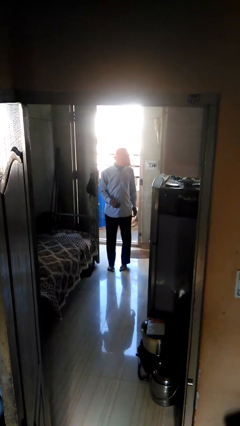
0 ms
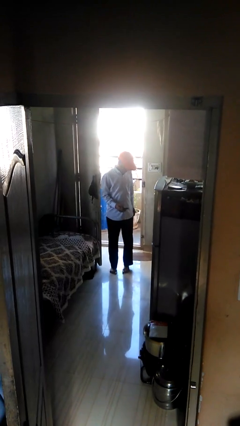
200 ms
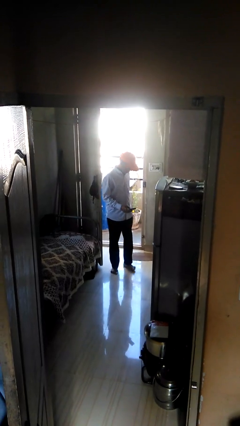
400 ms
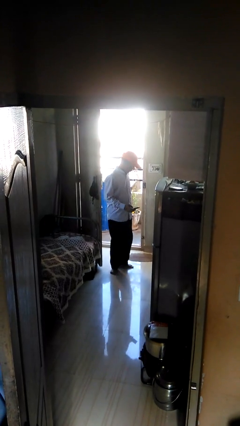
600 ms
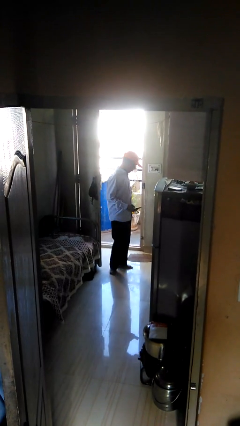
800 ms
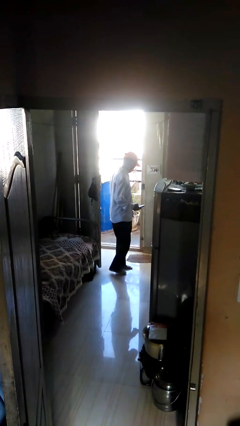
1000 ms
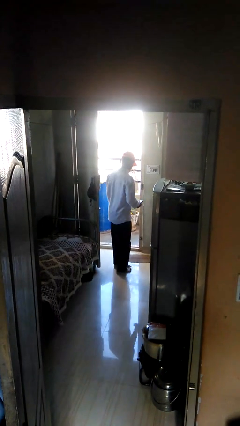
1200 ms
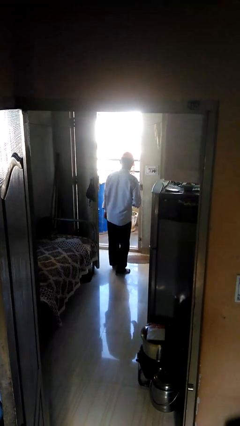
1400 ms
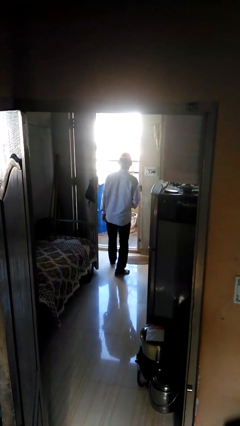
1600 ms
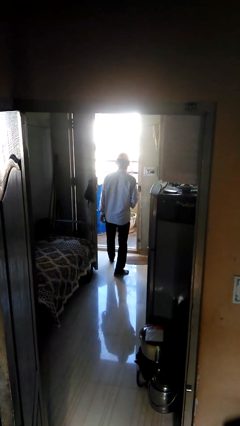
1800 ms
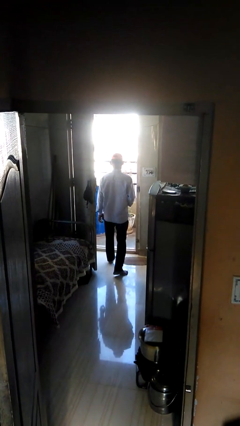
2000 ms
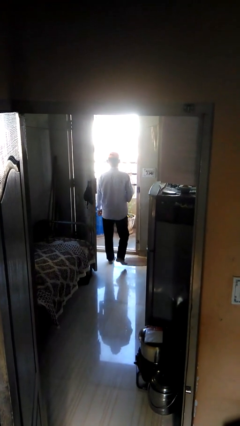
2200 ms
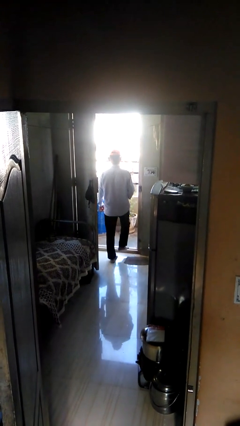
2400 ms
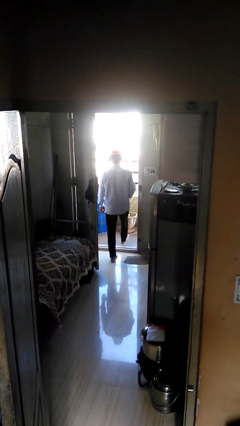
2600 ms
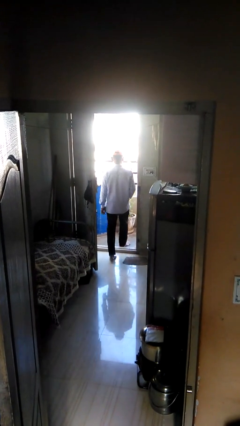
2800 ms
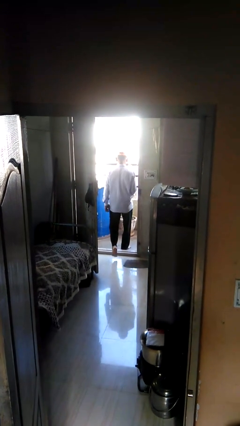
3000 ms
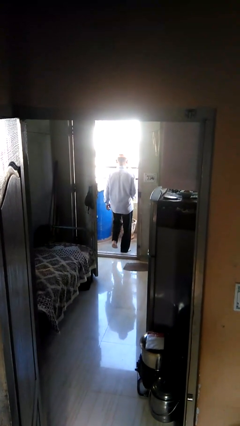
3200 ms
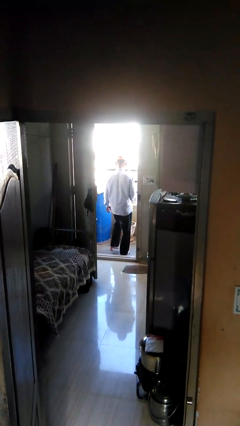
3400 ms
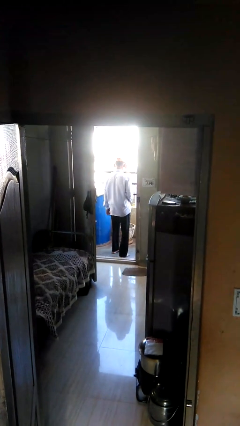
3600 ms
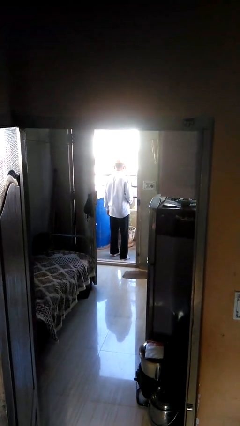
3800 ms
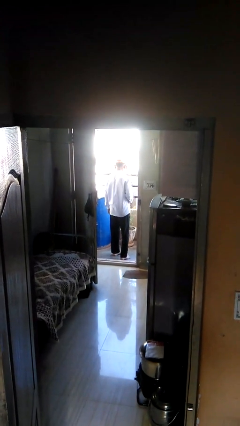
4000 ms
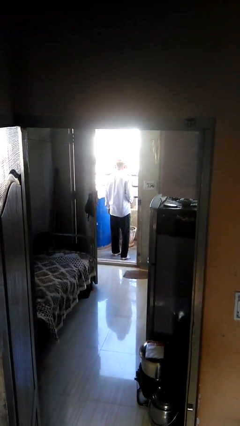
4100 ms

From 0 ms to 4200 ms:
person exits scene through structure

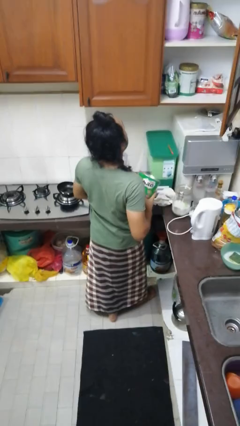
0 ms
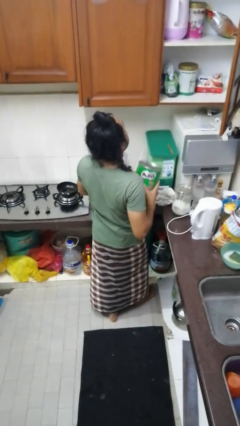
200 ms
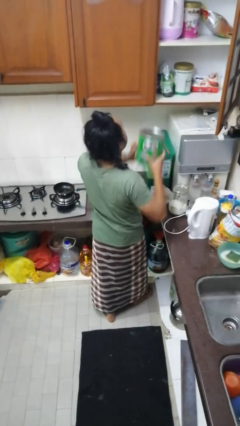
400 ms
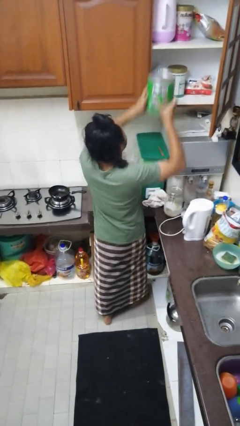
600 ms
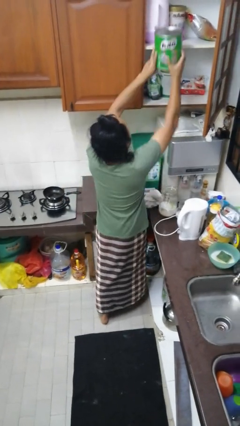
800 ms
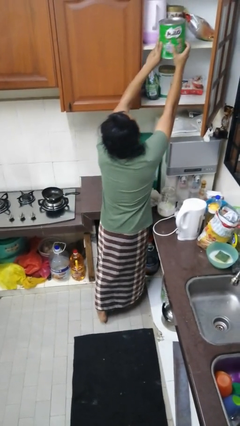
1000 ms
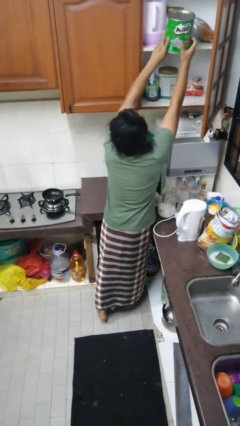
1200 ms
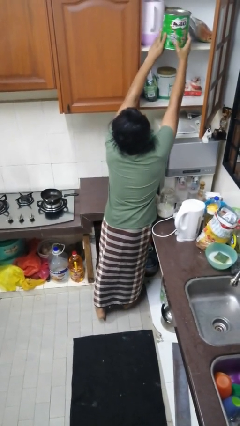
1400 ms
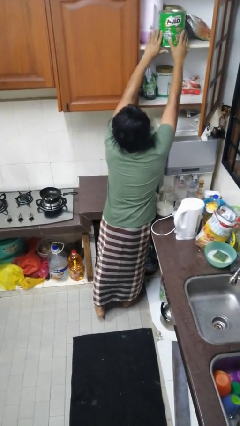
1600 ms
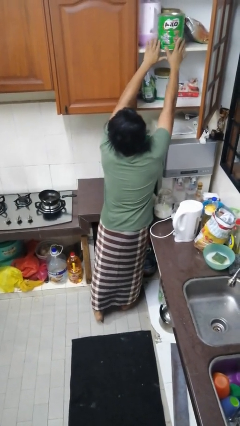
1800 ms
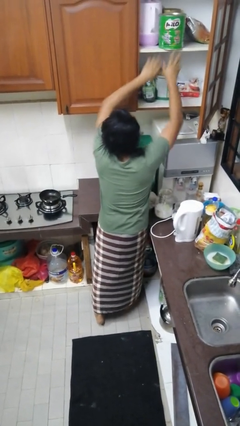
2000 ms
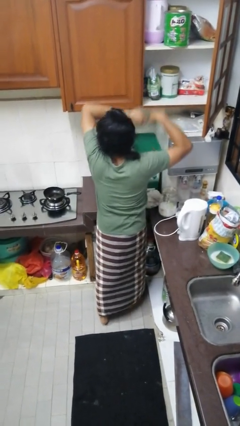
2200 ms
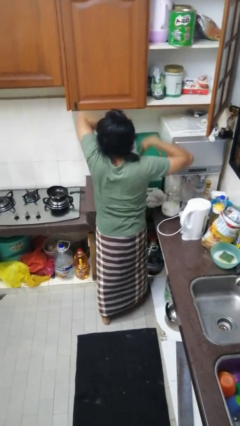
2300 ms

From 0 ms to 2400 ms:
person puts object in cabinet

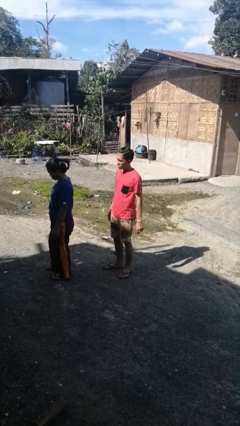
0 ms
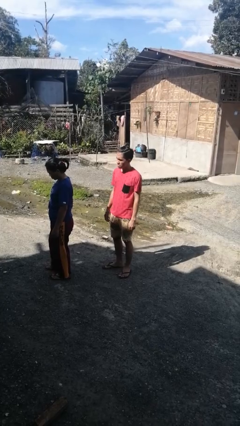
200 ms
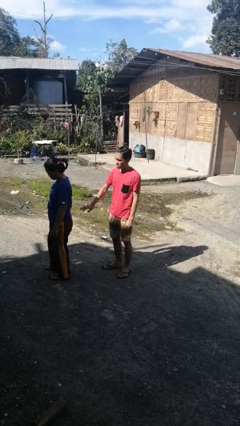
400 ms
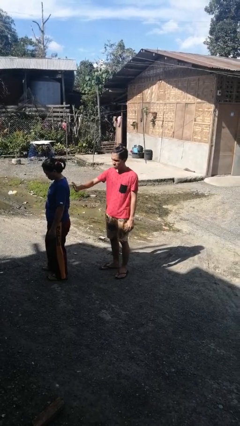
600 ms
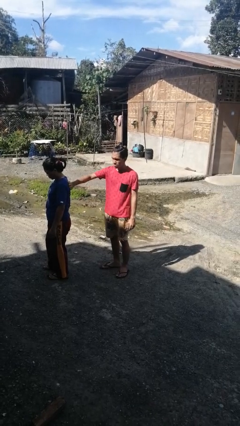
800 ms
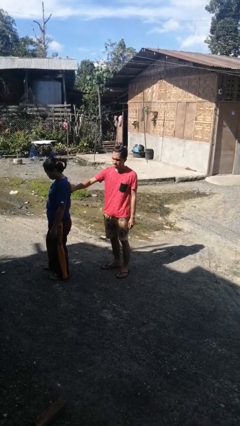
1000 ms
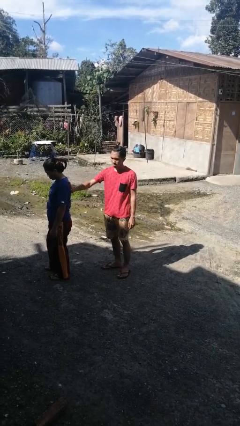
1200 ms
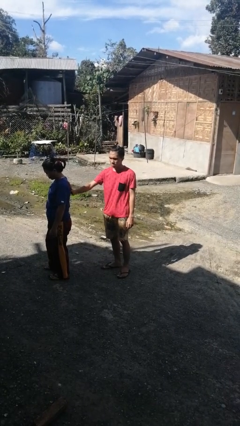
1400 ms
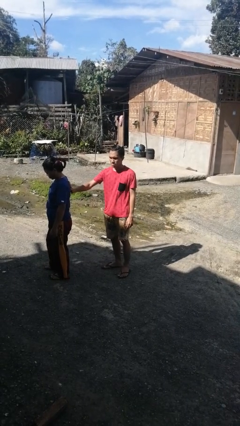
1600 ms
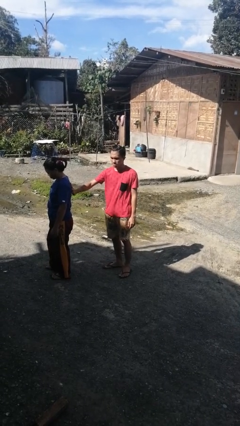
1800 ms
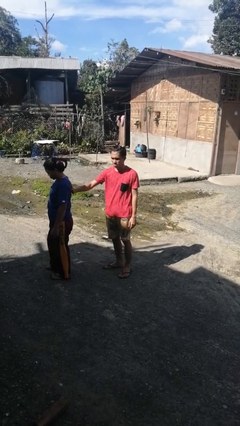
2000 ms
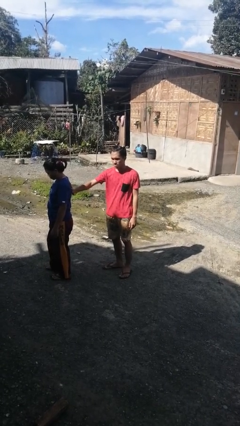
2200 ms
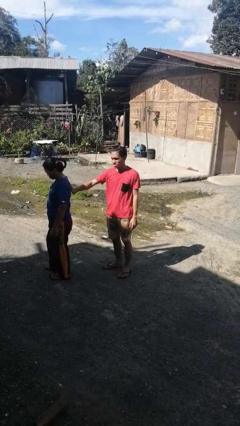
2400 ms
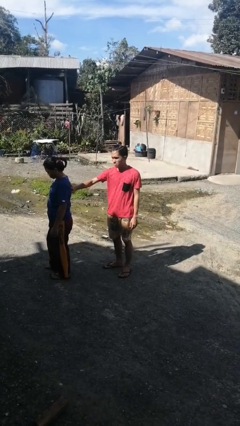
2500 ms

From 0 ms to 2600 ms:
person touches back of person

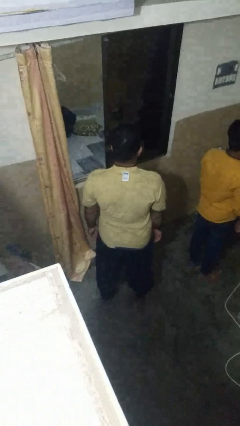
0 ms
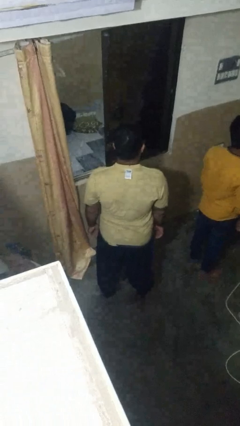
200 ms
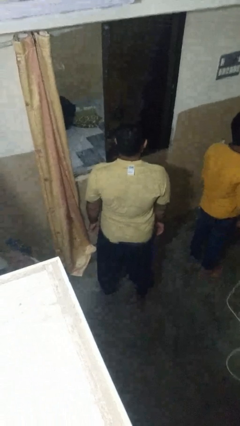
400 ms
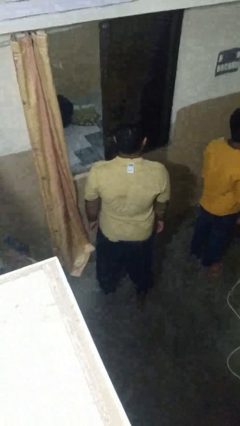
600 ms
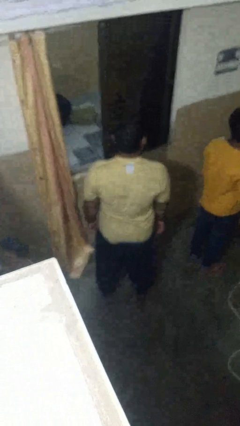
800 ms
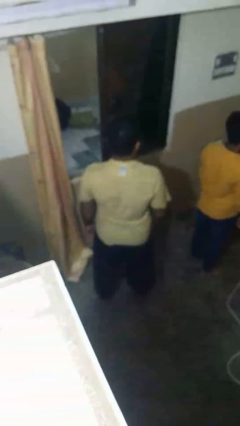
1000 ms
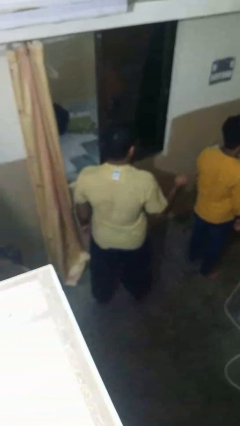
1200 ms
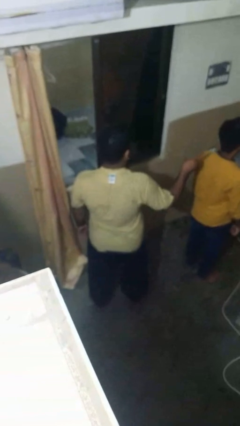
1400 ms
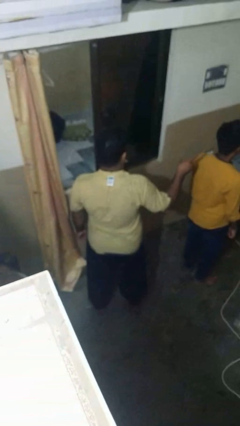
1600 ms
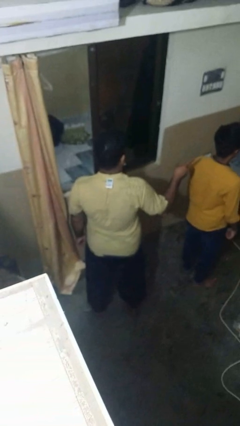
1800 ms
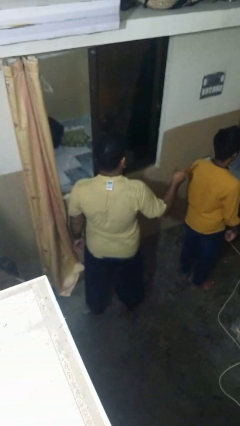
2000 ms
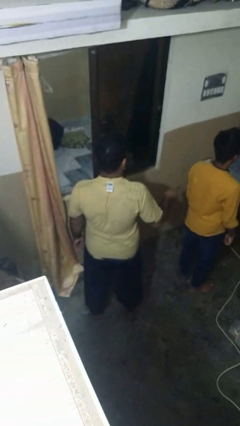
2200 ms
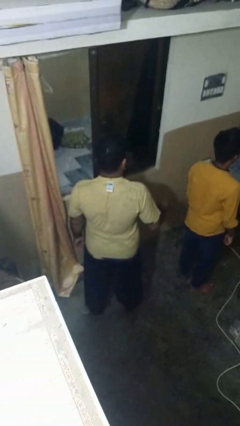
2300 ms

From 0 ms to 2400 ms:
person points at person

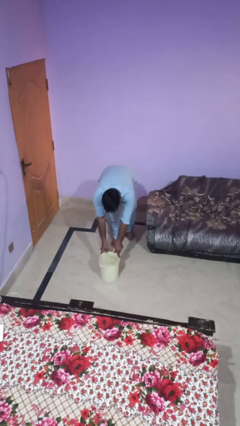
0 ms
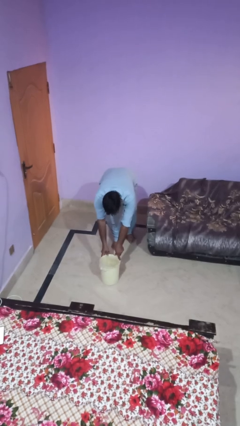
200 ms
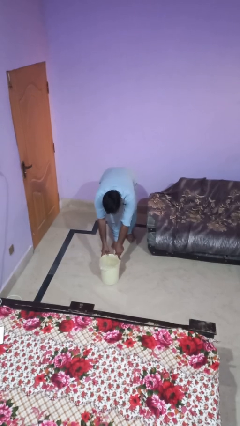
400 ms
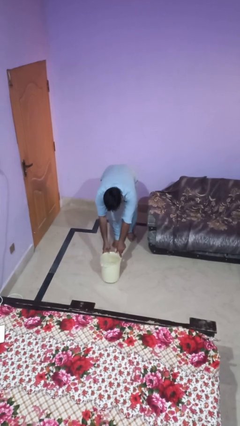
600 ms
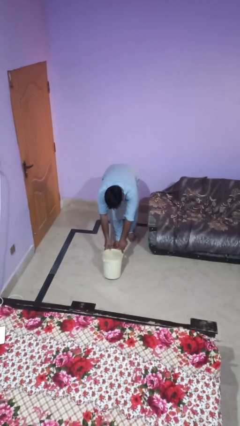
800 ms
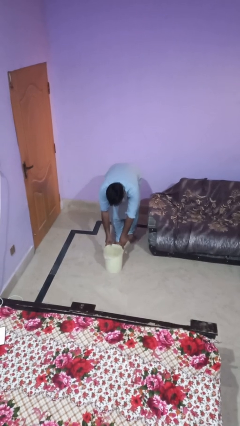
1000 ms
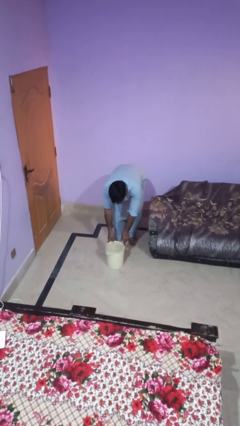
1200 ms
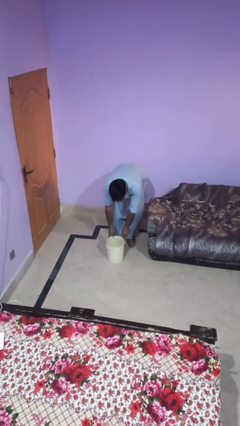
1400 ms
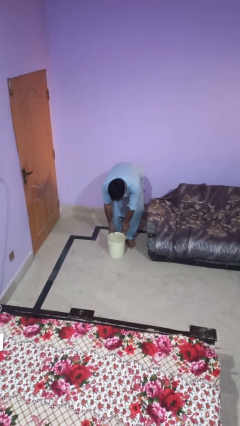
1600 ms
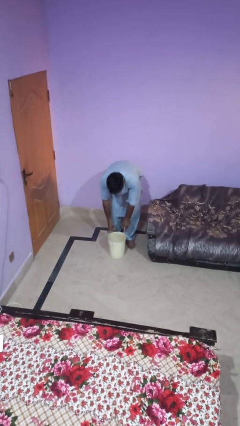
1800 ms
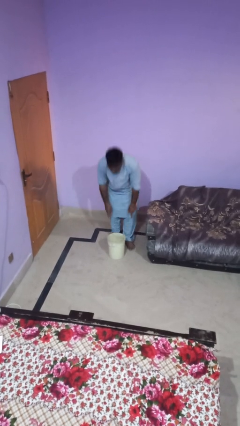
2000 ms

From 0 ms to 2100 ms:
person pulls wheeled trashcan

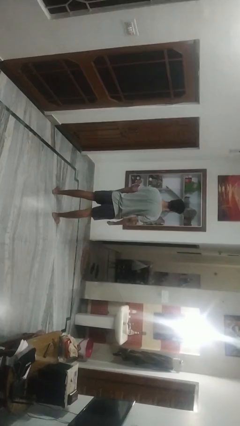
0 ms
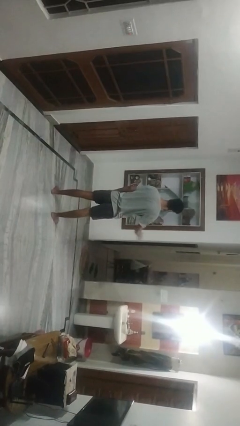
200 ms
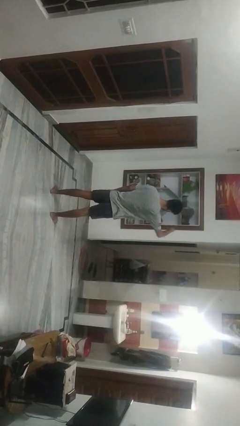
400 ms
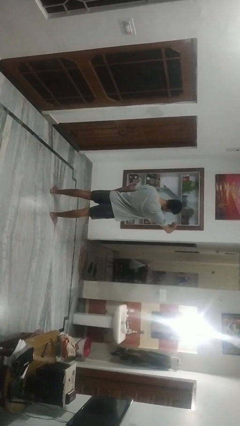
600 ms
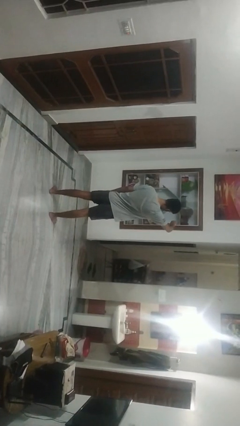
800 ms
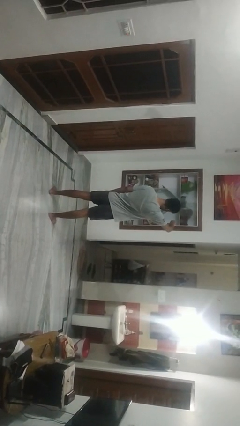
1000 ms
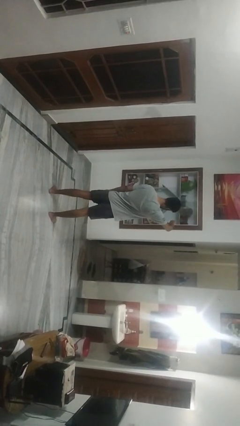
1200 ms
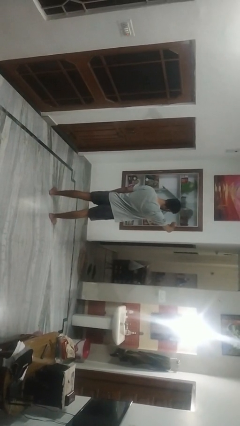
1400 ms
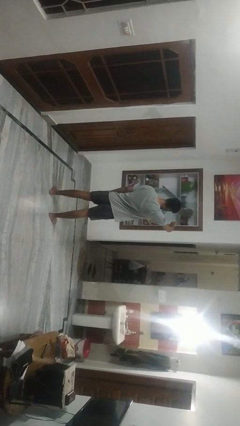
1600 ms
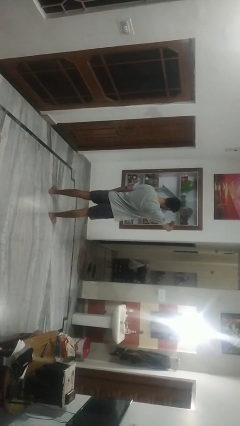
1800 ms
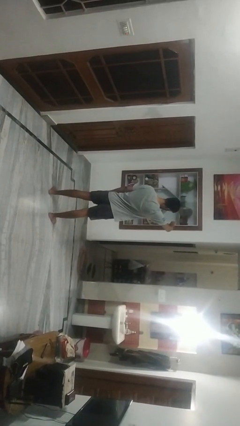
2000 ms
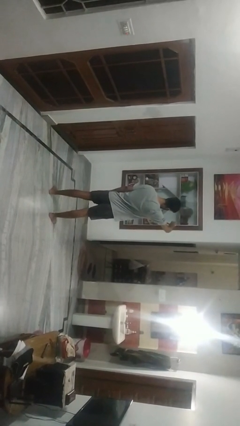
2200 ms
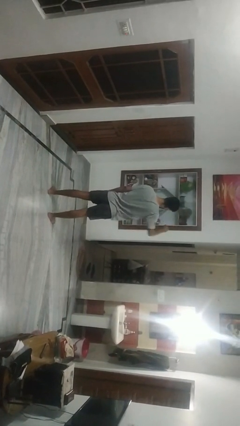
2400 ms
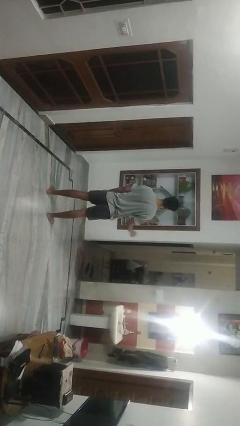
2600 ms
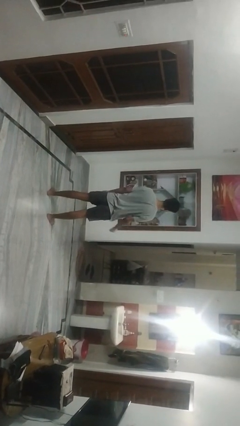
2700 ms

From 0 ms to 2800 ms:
person gestures thumbs down

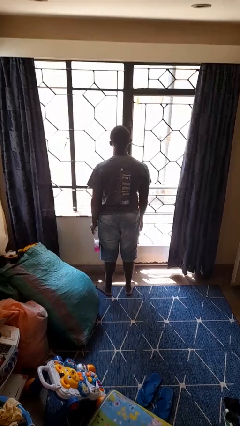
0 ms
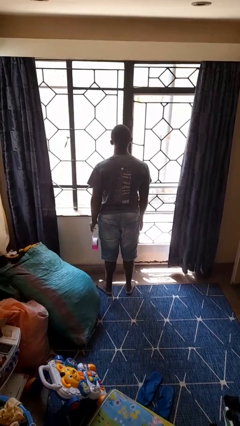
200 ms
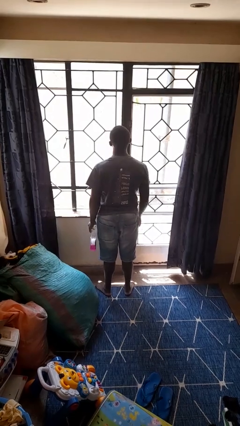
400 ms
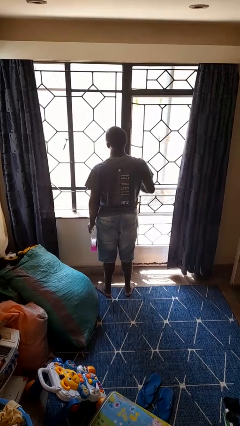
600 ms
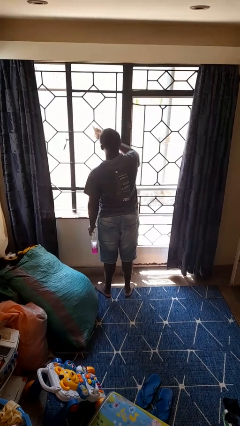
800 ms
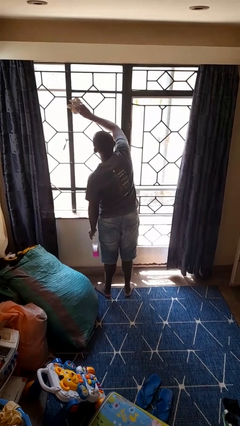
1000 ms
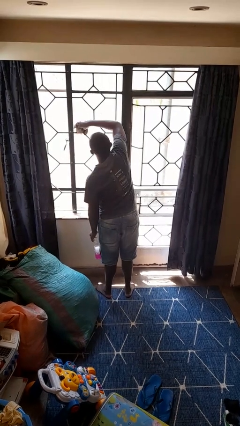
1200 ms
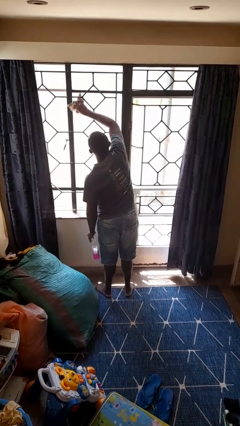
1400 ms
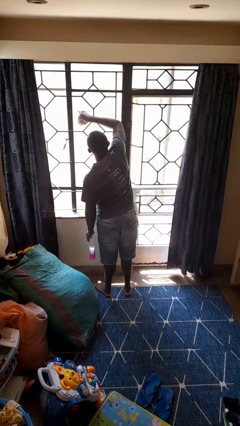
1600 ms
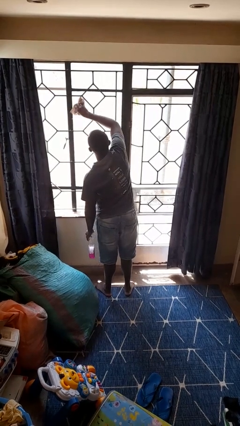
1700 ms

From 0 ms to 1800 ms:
person washes window
